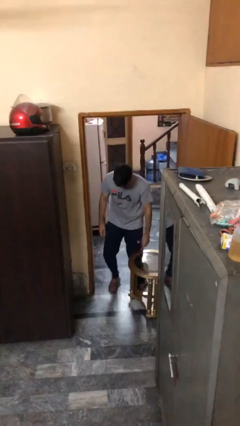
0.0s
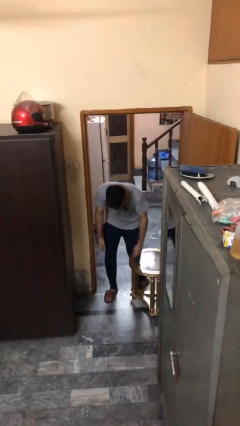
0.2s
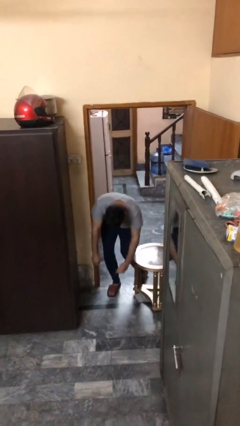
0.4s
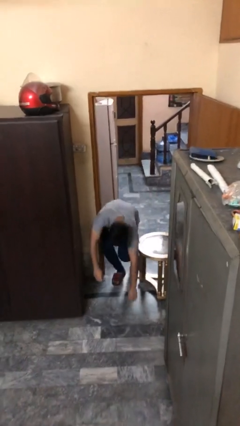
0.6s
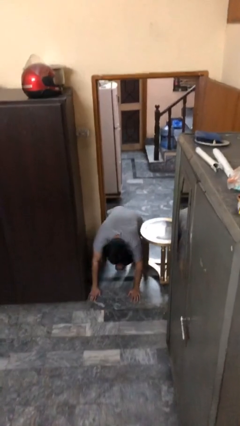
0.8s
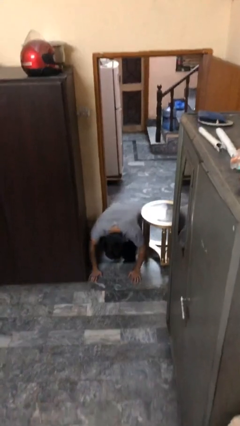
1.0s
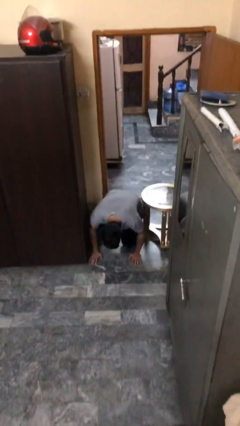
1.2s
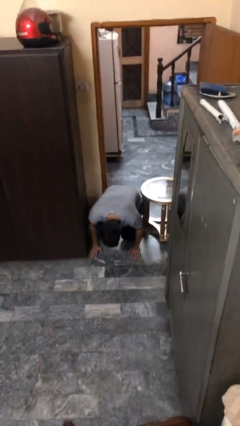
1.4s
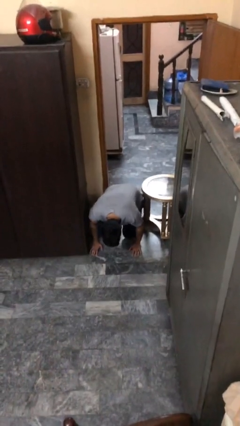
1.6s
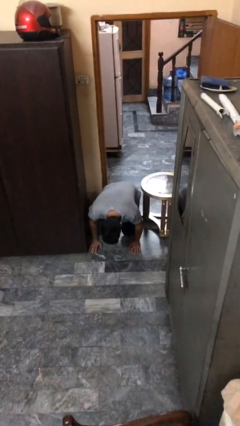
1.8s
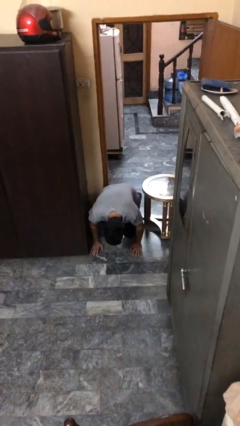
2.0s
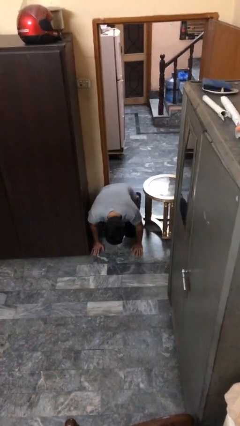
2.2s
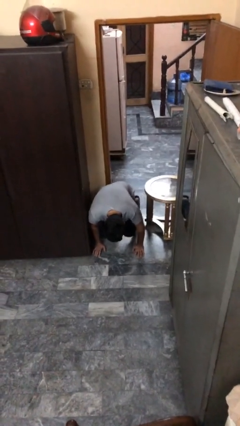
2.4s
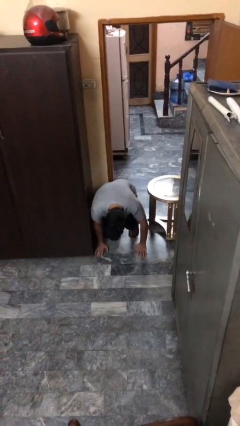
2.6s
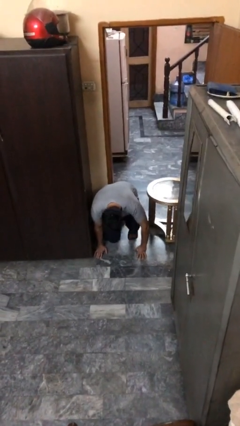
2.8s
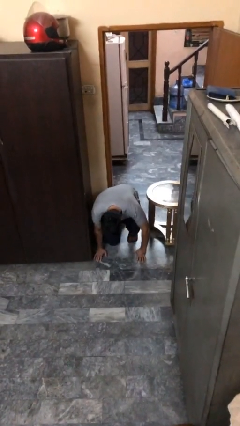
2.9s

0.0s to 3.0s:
person trips on object on floor

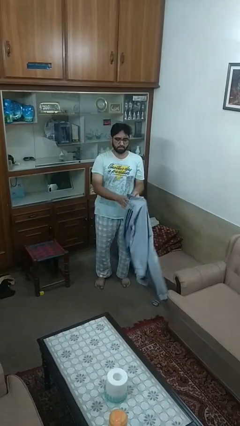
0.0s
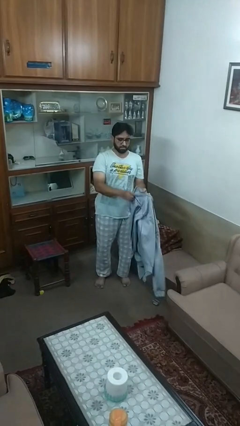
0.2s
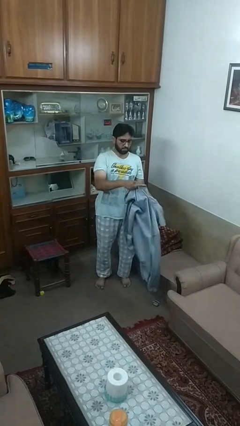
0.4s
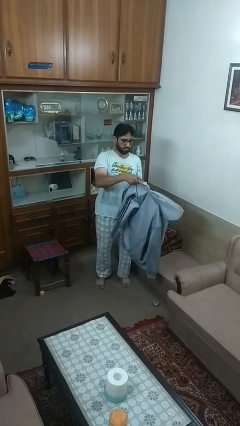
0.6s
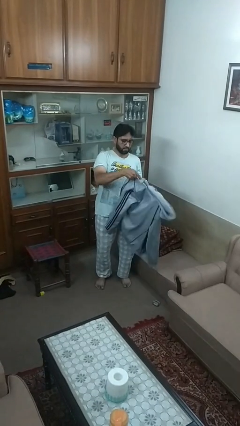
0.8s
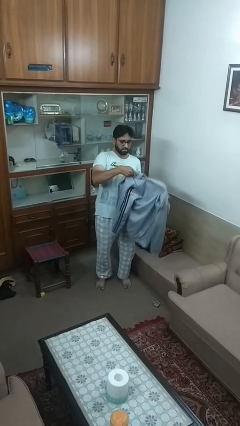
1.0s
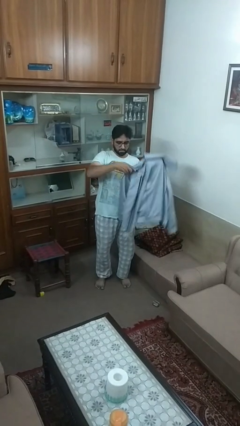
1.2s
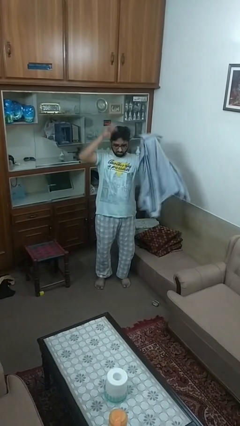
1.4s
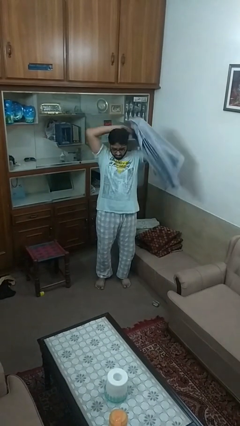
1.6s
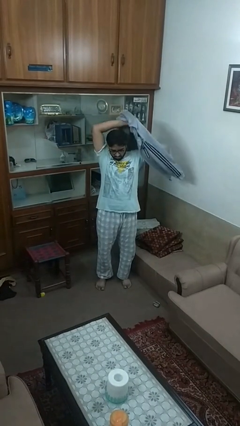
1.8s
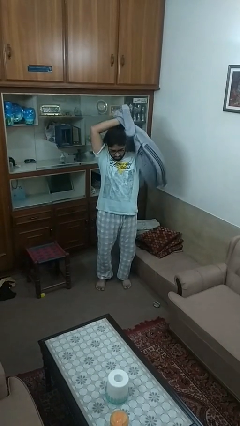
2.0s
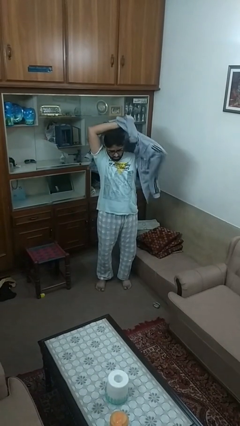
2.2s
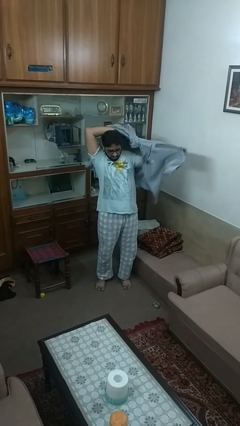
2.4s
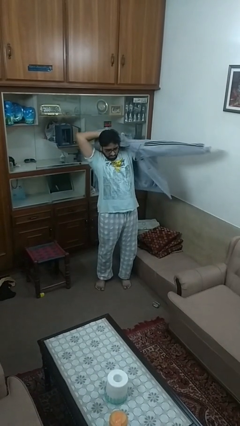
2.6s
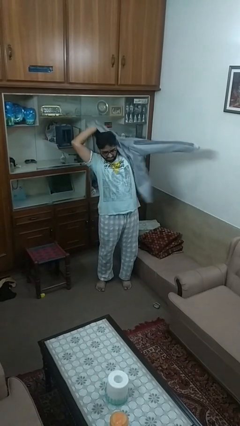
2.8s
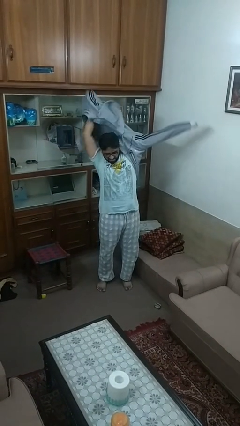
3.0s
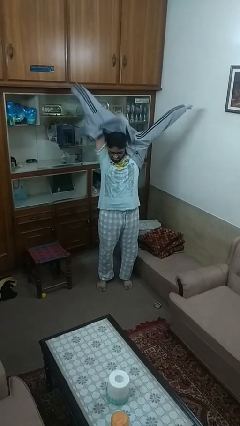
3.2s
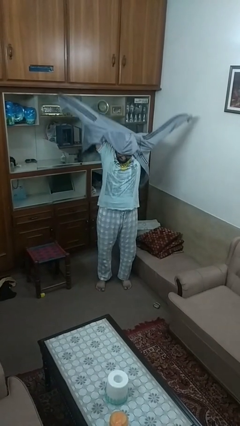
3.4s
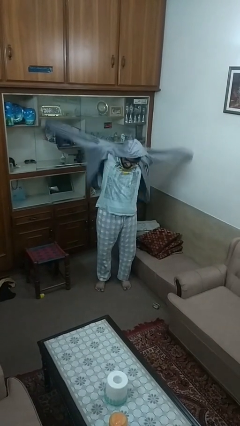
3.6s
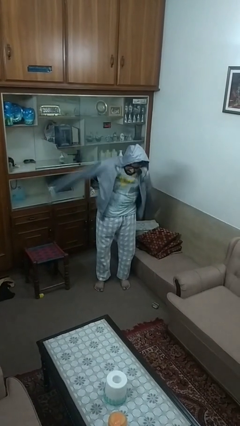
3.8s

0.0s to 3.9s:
person puts on jacket

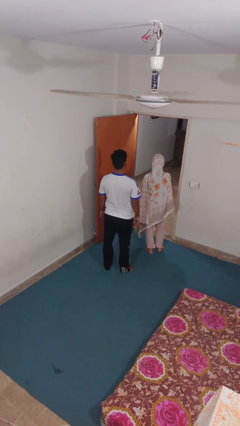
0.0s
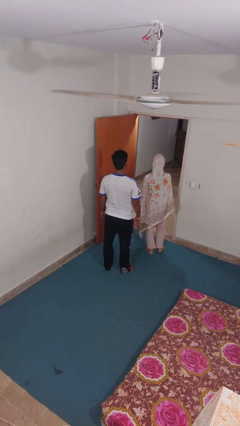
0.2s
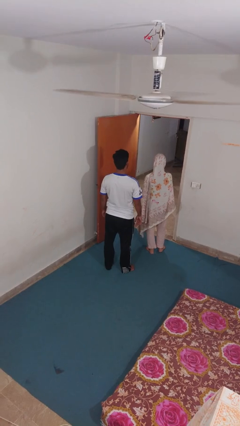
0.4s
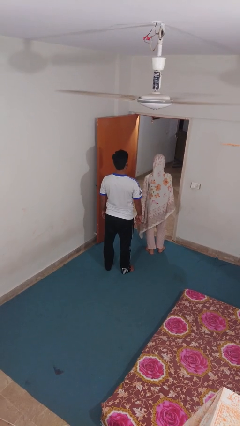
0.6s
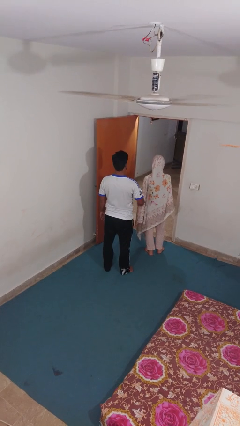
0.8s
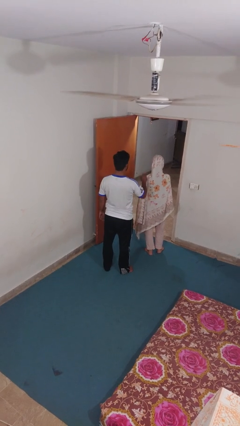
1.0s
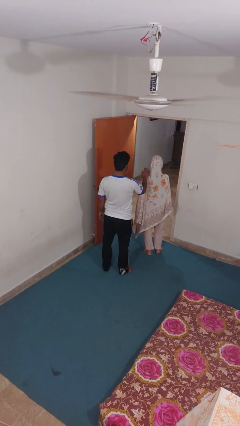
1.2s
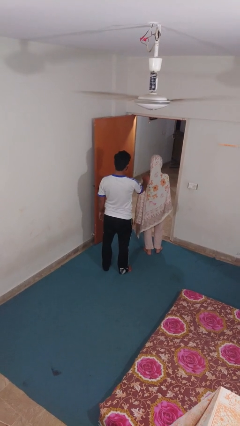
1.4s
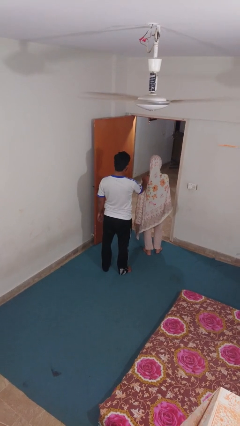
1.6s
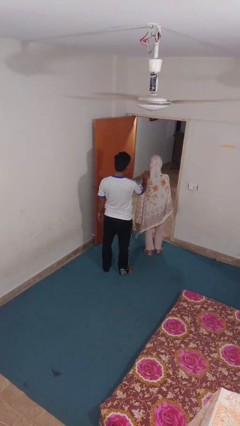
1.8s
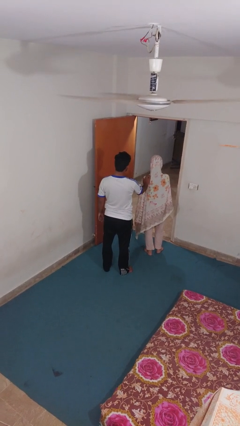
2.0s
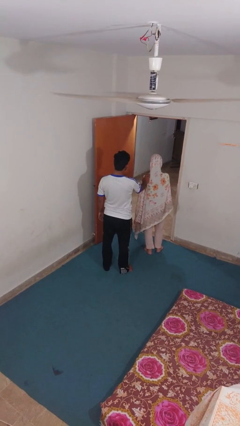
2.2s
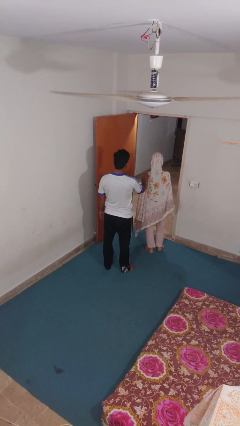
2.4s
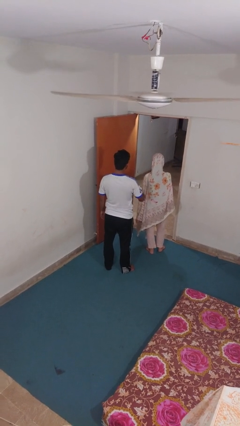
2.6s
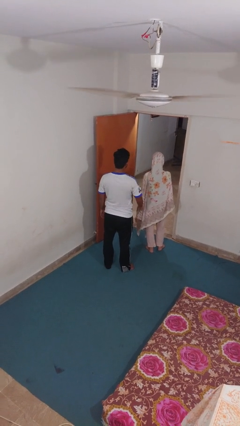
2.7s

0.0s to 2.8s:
person touches back of person

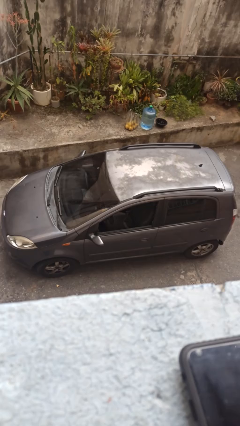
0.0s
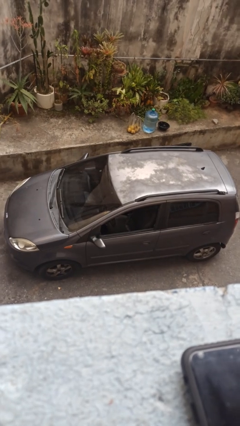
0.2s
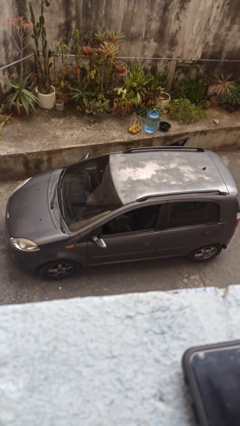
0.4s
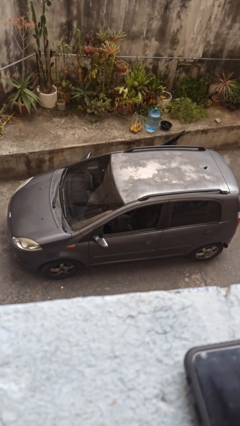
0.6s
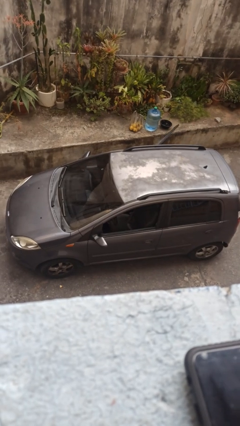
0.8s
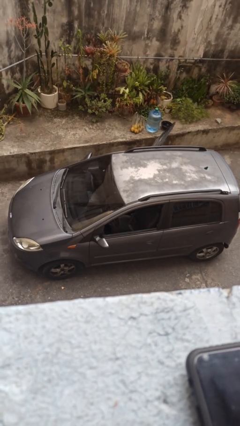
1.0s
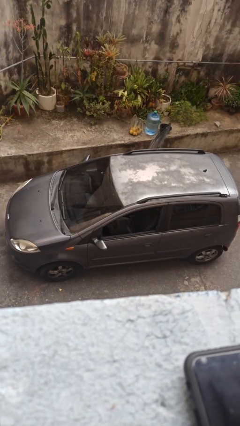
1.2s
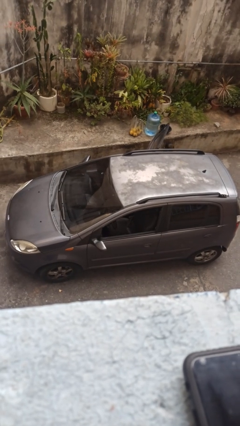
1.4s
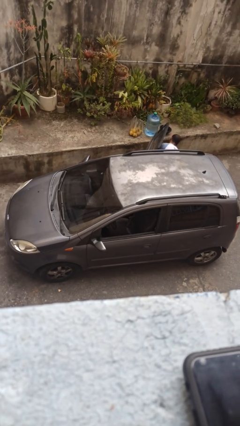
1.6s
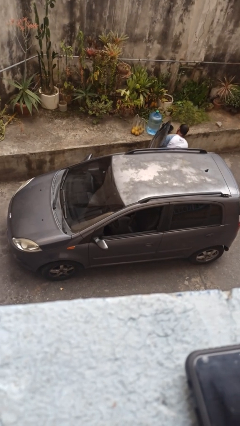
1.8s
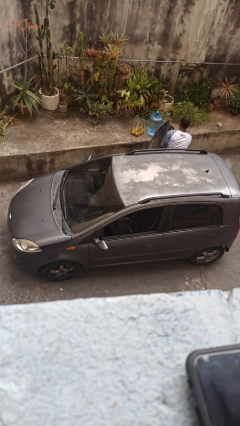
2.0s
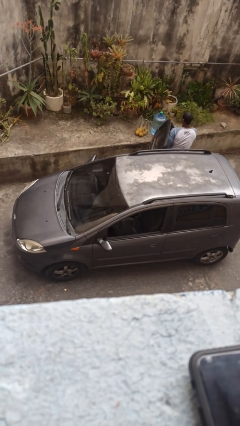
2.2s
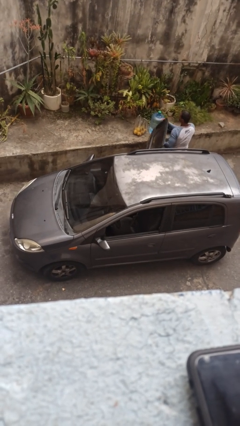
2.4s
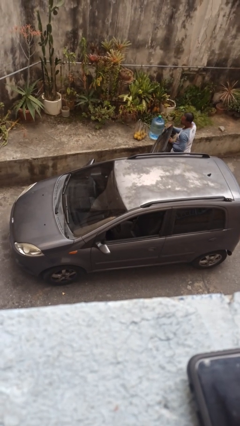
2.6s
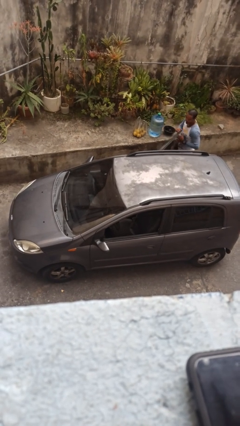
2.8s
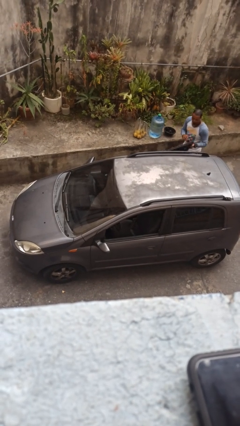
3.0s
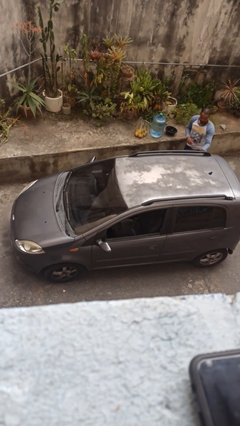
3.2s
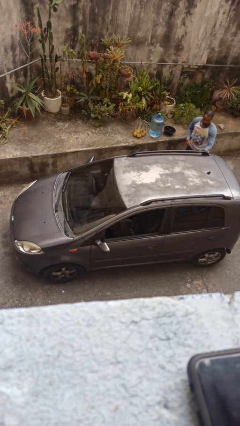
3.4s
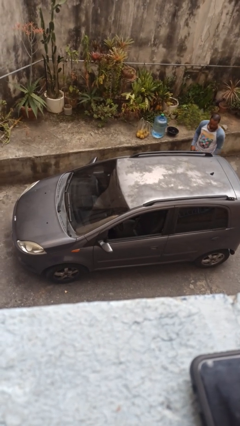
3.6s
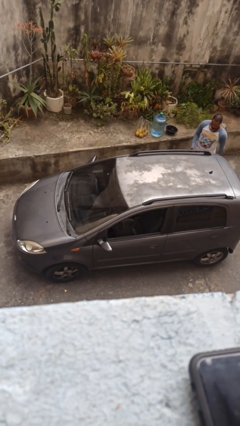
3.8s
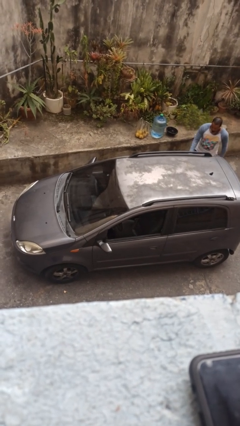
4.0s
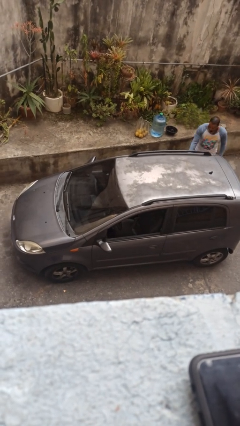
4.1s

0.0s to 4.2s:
car drops off person

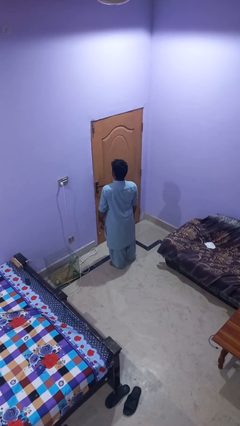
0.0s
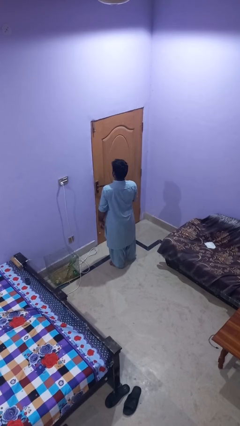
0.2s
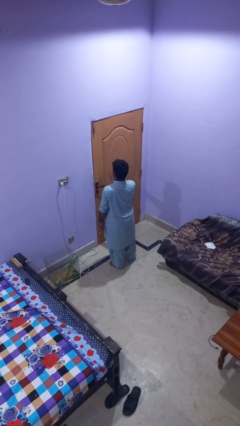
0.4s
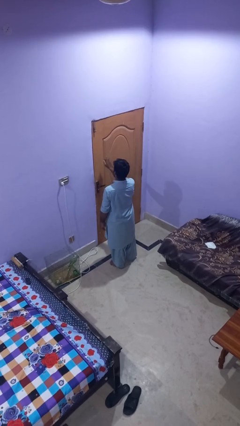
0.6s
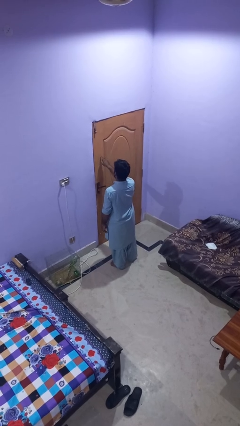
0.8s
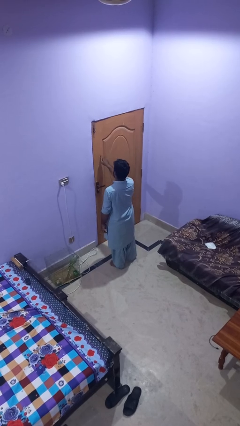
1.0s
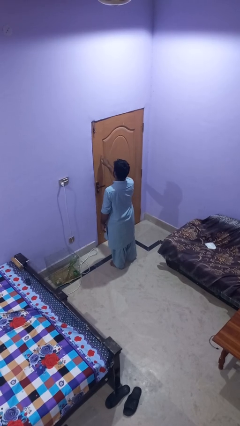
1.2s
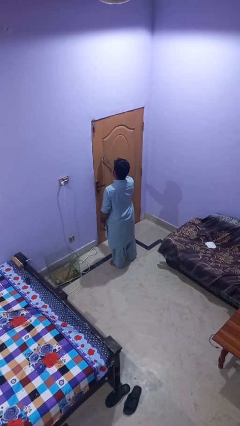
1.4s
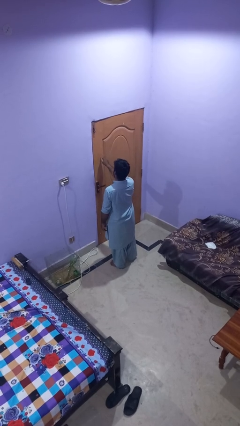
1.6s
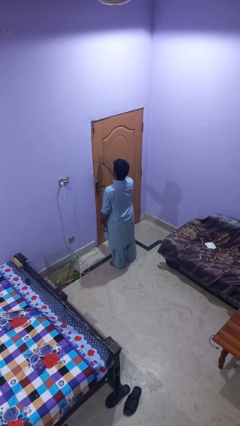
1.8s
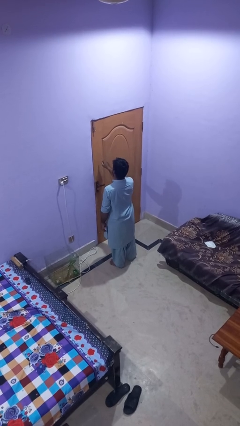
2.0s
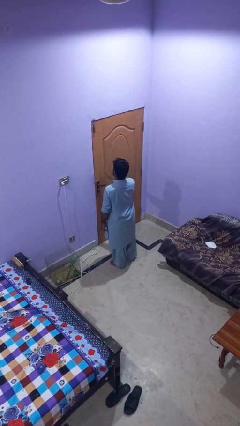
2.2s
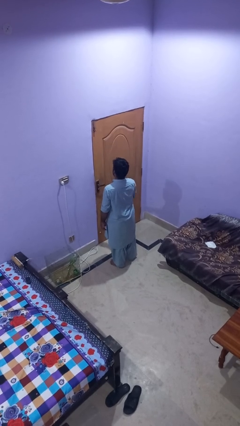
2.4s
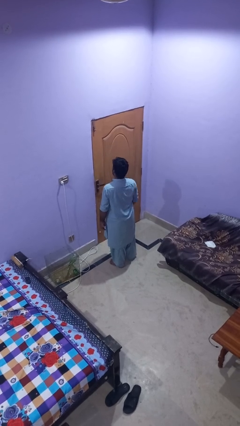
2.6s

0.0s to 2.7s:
person taps object with finger

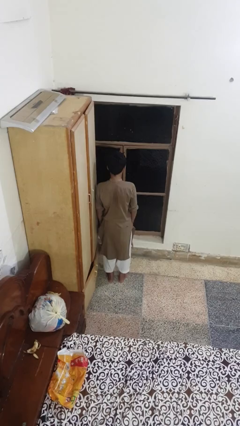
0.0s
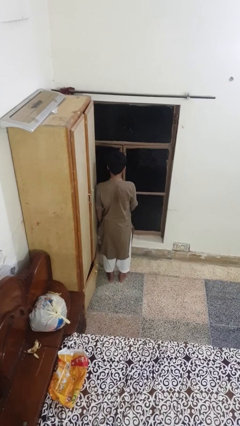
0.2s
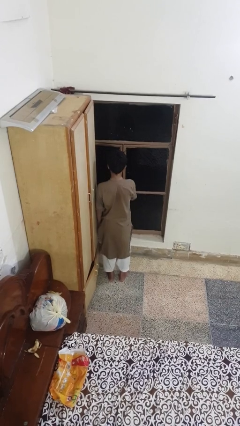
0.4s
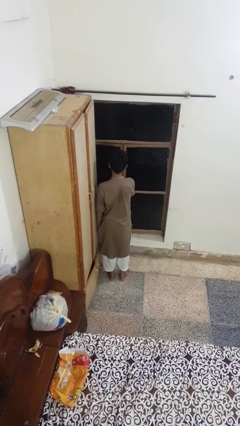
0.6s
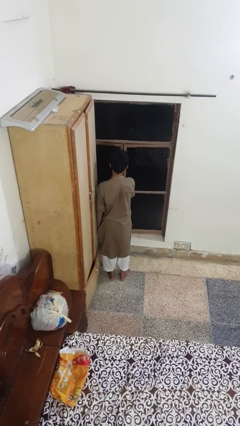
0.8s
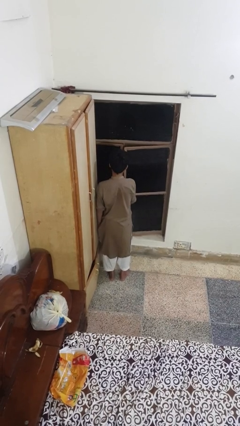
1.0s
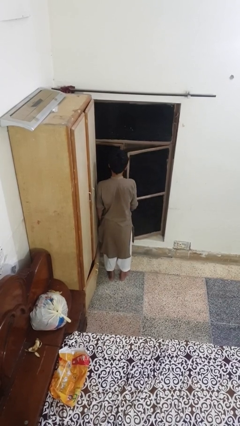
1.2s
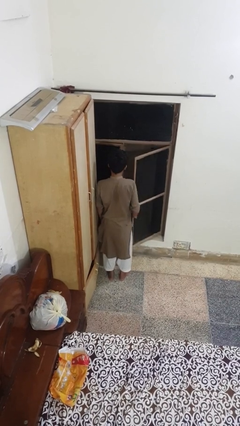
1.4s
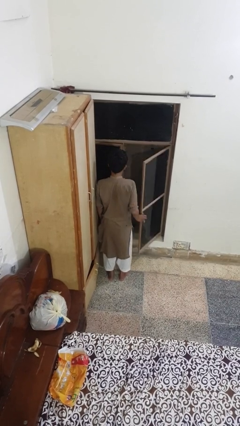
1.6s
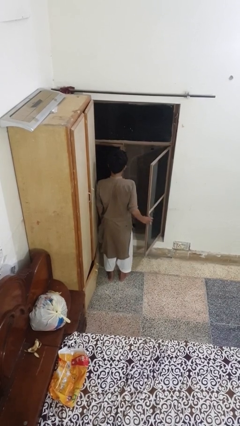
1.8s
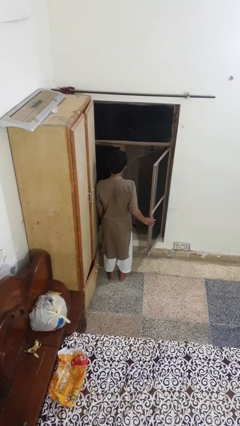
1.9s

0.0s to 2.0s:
person opens home window
